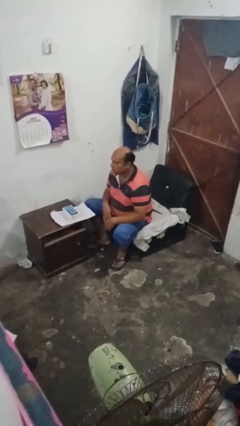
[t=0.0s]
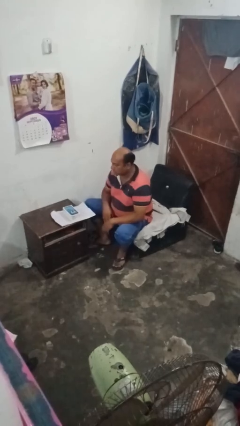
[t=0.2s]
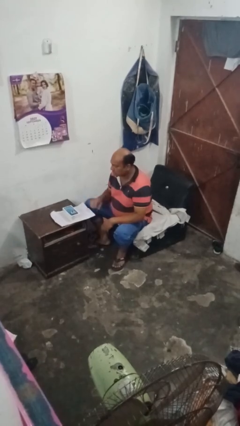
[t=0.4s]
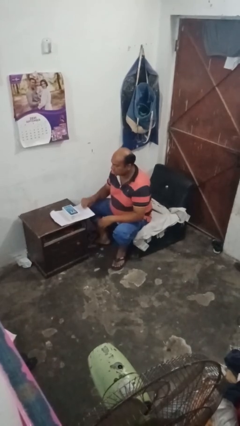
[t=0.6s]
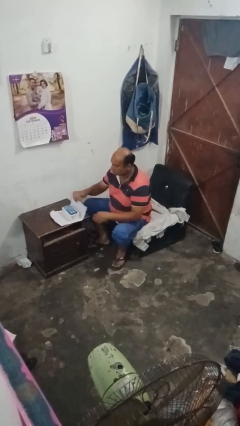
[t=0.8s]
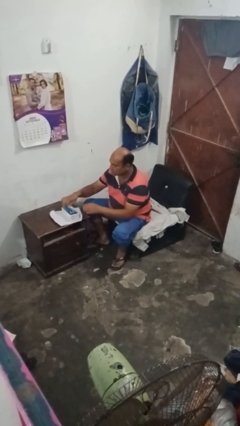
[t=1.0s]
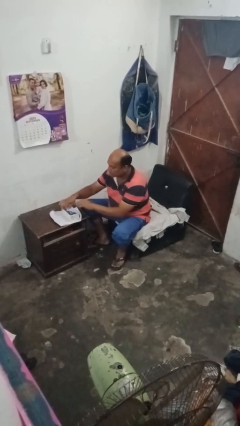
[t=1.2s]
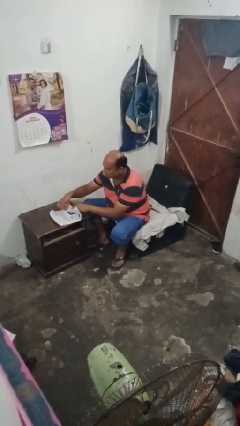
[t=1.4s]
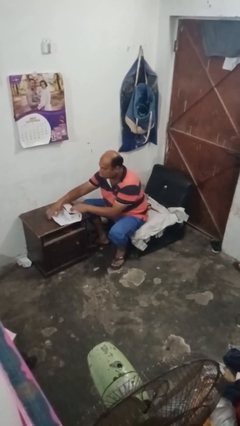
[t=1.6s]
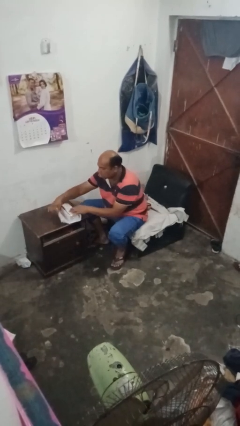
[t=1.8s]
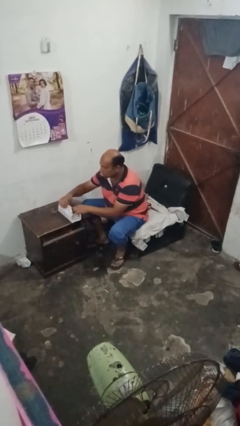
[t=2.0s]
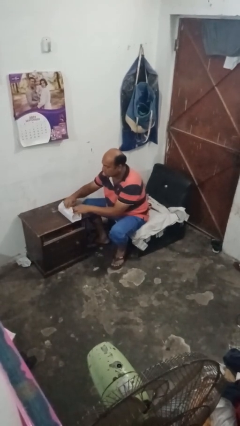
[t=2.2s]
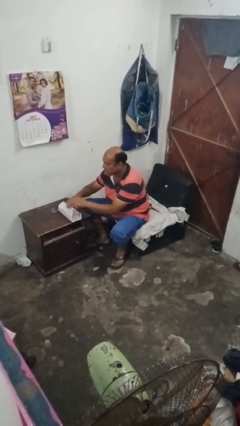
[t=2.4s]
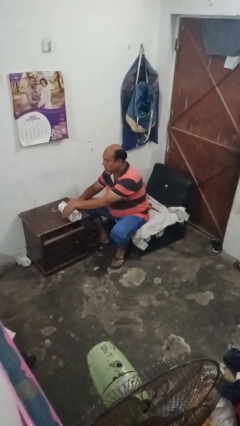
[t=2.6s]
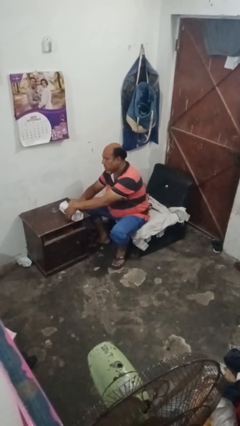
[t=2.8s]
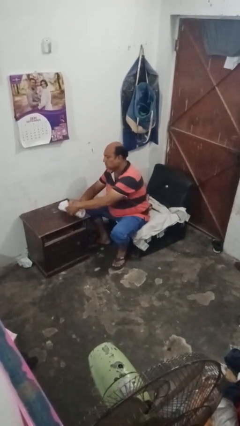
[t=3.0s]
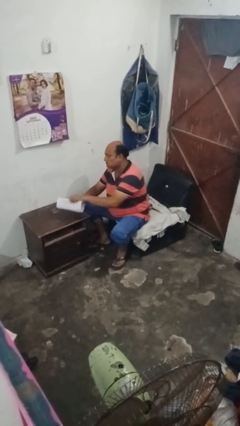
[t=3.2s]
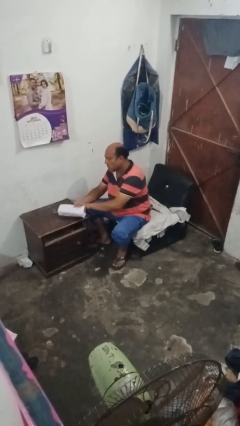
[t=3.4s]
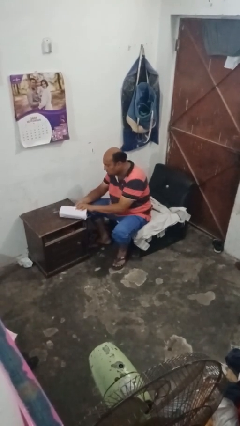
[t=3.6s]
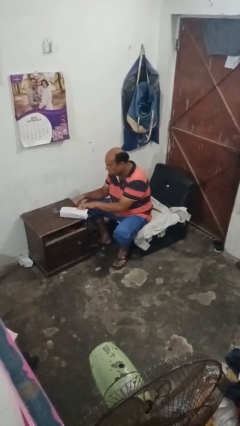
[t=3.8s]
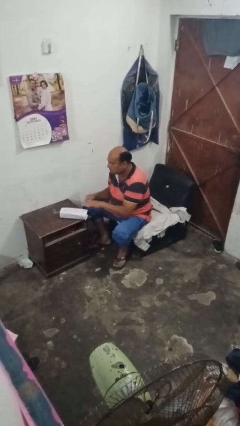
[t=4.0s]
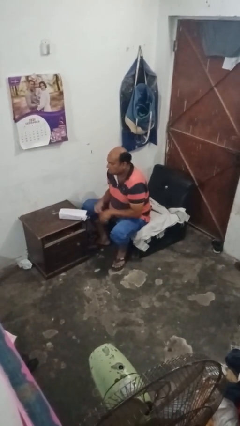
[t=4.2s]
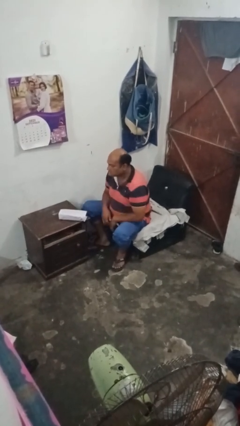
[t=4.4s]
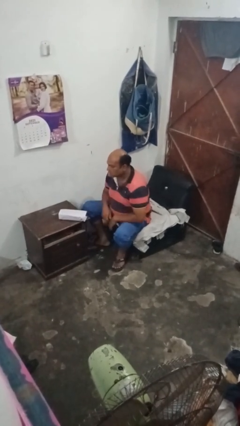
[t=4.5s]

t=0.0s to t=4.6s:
person wraps box

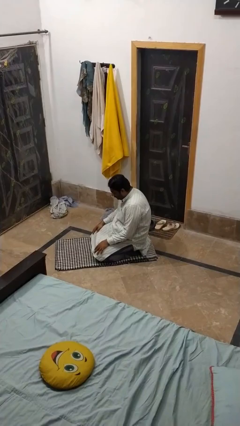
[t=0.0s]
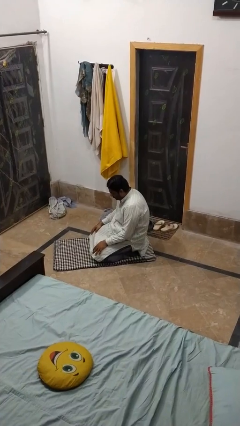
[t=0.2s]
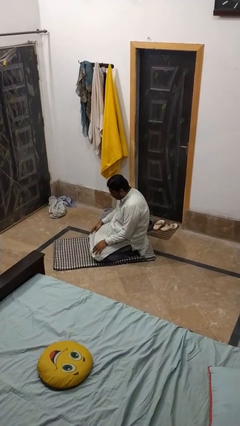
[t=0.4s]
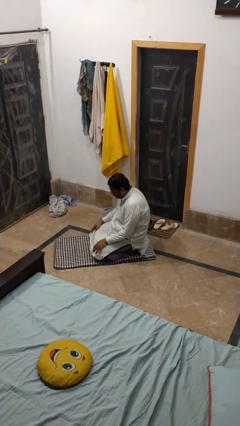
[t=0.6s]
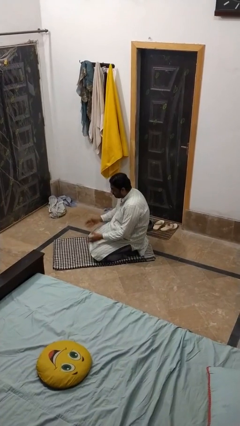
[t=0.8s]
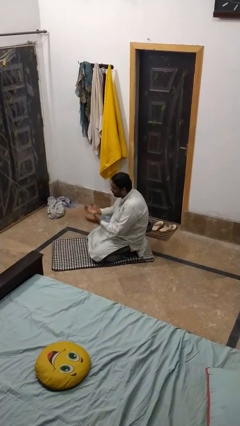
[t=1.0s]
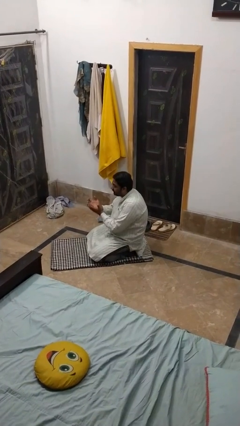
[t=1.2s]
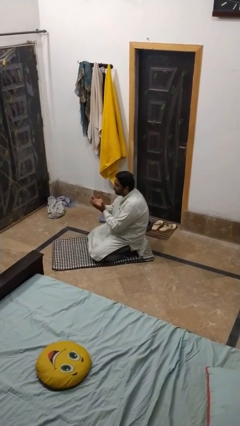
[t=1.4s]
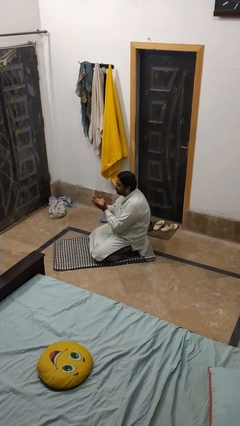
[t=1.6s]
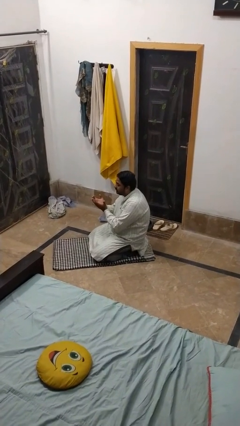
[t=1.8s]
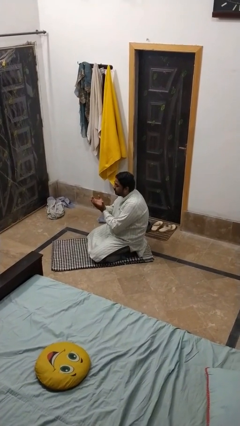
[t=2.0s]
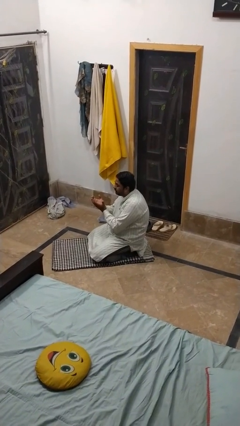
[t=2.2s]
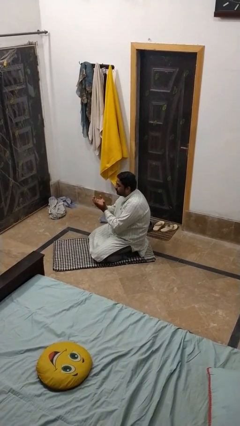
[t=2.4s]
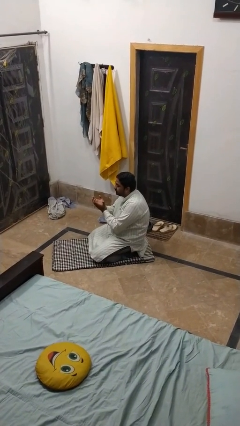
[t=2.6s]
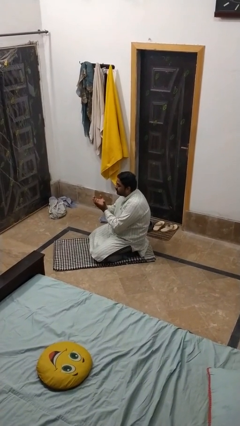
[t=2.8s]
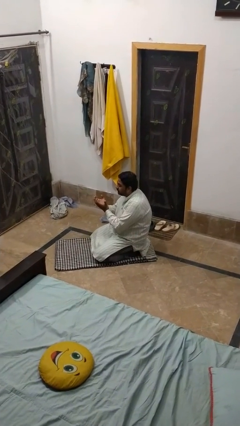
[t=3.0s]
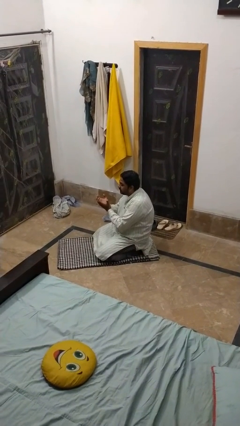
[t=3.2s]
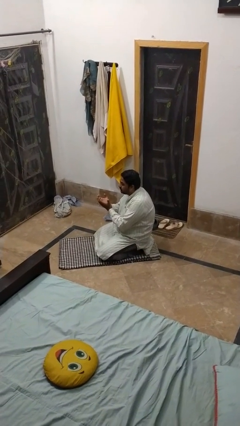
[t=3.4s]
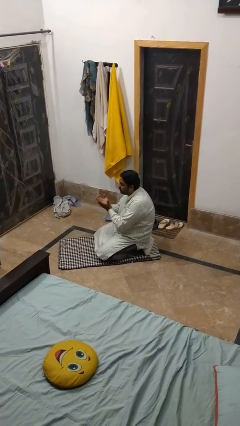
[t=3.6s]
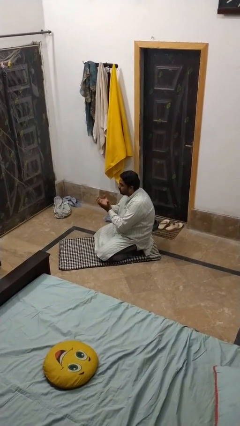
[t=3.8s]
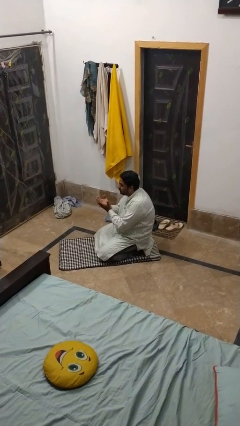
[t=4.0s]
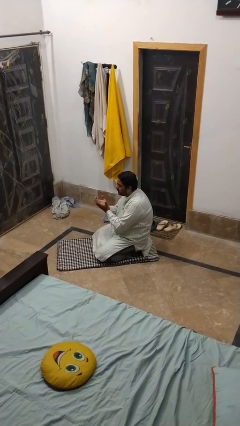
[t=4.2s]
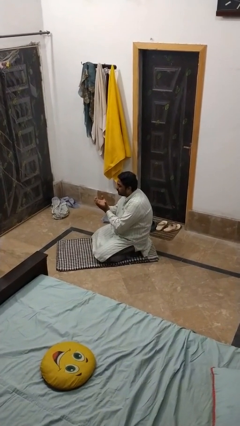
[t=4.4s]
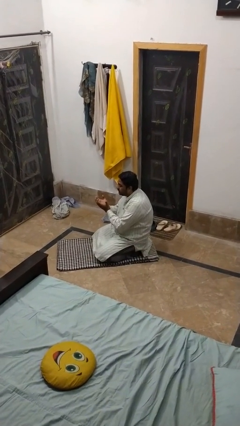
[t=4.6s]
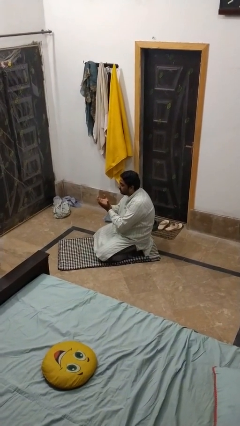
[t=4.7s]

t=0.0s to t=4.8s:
person prays

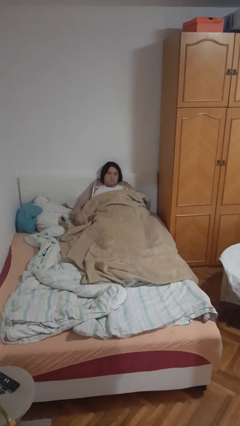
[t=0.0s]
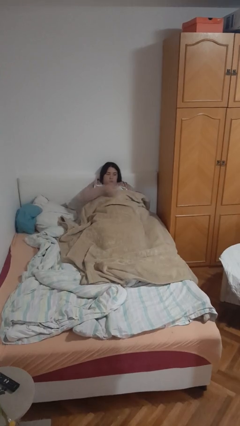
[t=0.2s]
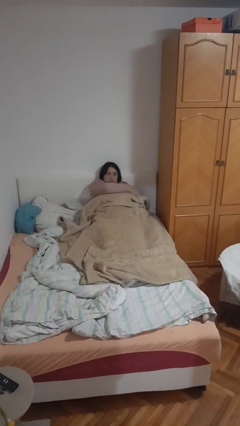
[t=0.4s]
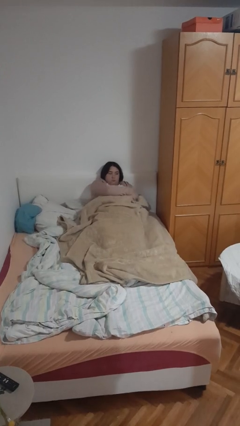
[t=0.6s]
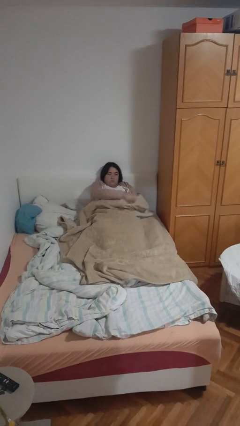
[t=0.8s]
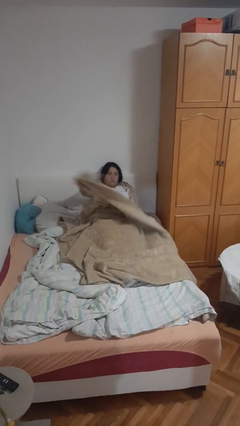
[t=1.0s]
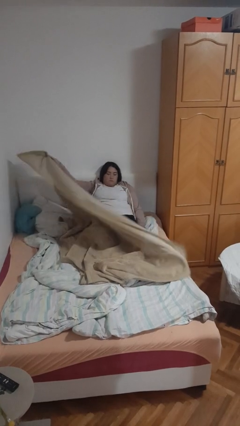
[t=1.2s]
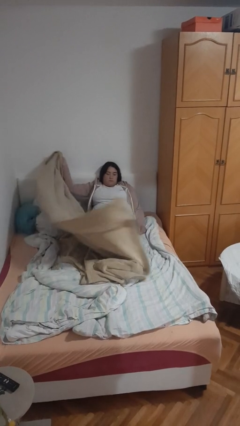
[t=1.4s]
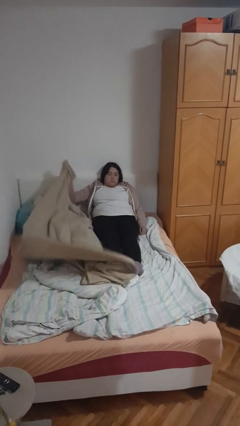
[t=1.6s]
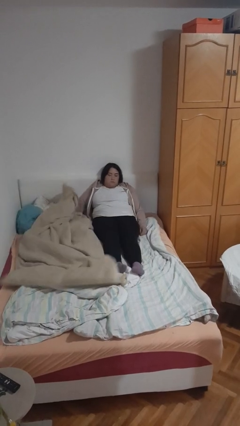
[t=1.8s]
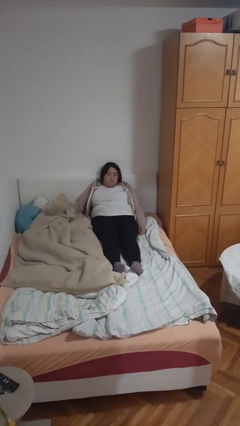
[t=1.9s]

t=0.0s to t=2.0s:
person uncovers with blanket

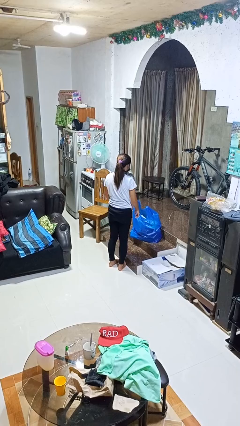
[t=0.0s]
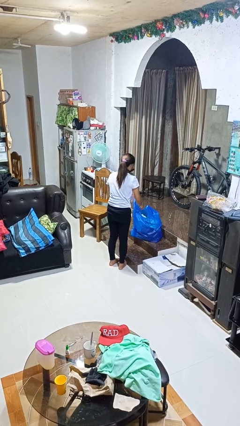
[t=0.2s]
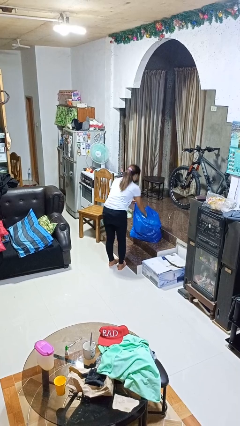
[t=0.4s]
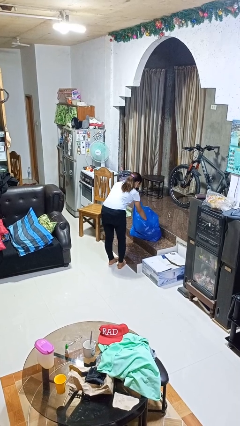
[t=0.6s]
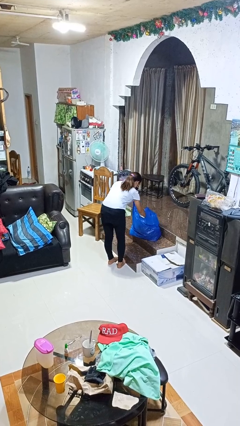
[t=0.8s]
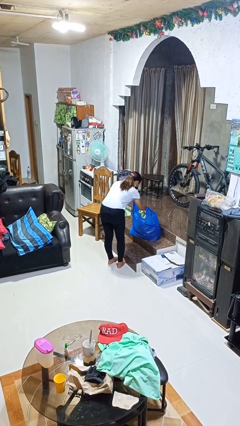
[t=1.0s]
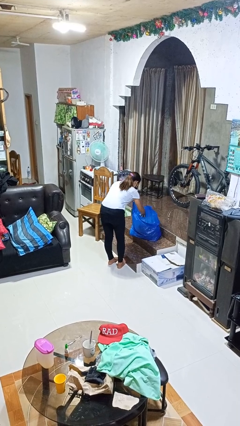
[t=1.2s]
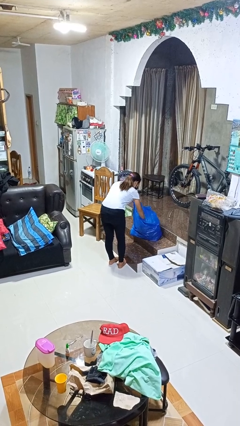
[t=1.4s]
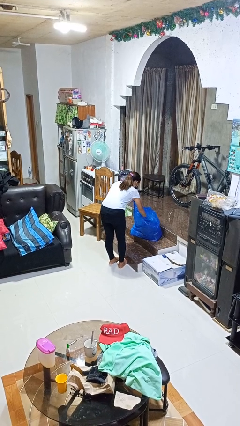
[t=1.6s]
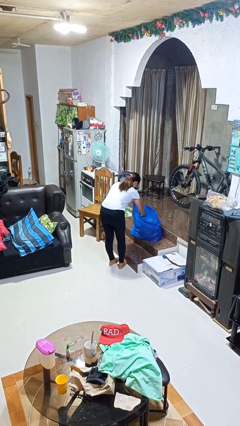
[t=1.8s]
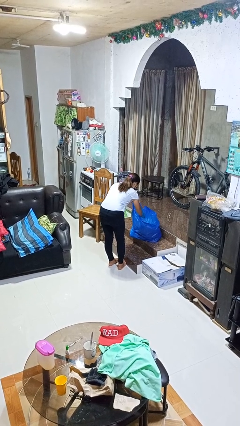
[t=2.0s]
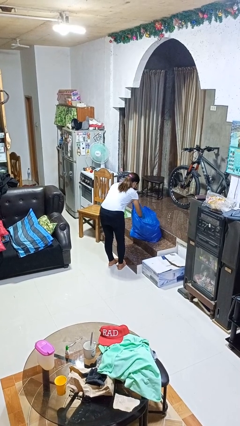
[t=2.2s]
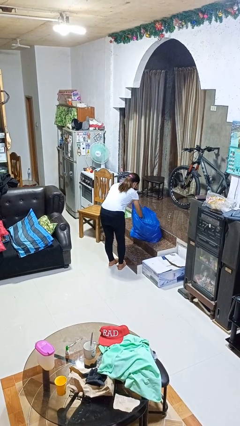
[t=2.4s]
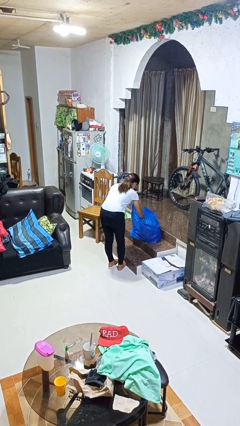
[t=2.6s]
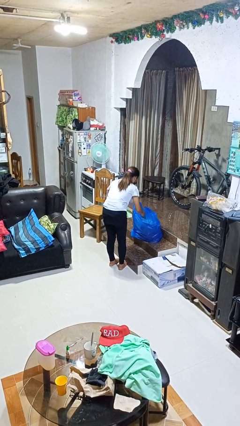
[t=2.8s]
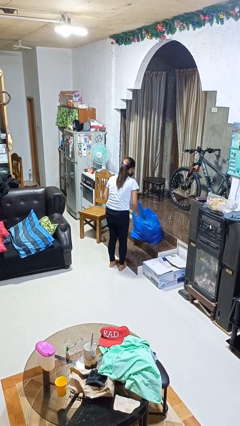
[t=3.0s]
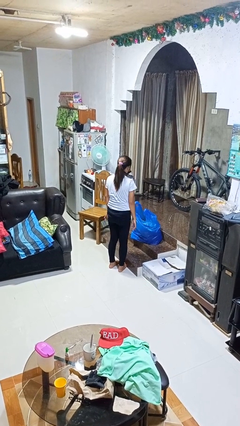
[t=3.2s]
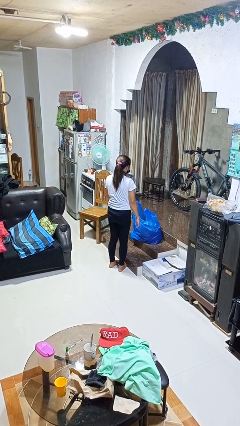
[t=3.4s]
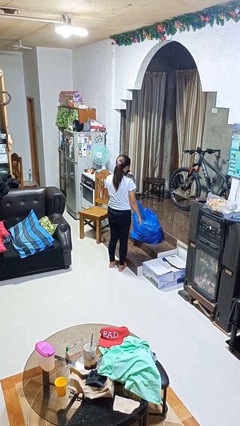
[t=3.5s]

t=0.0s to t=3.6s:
person searches in bag

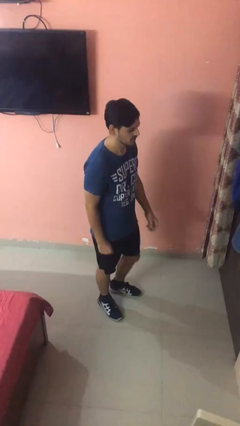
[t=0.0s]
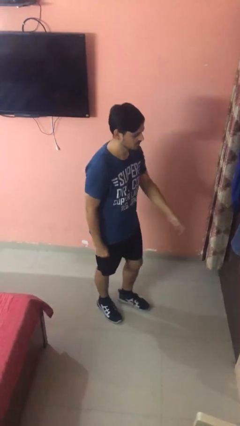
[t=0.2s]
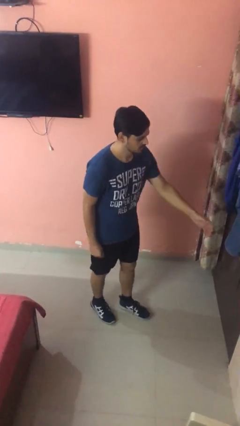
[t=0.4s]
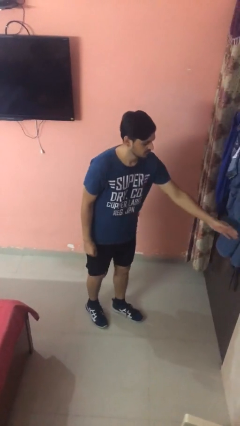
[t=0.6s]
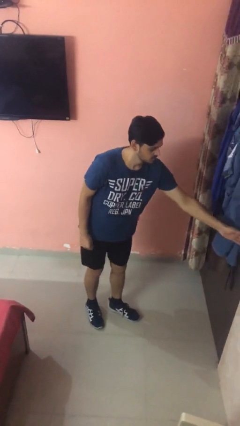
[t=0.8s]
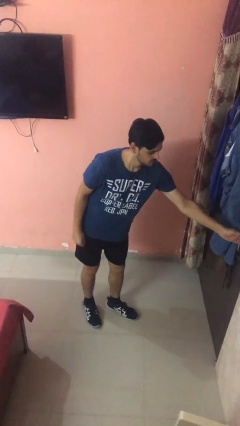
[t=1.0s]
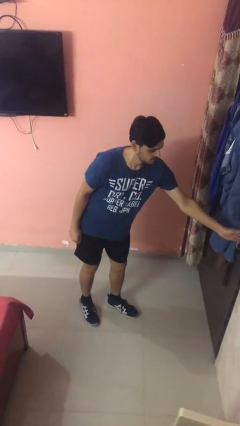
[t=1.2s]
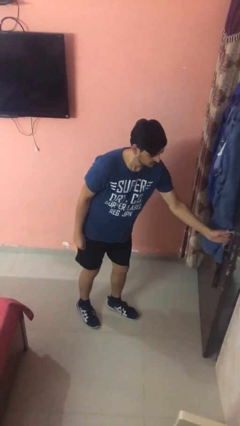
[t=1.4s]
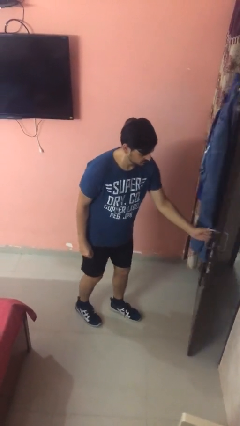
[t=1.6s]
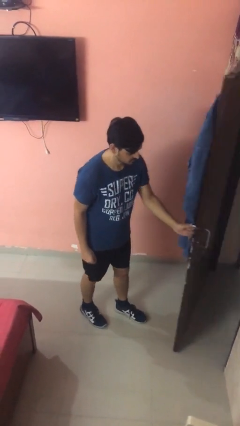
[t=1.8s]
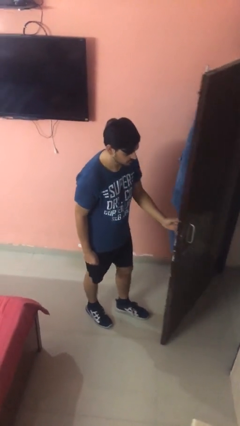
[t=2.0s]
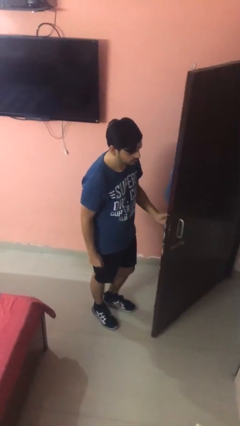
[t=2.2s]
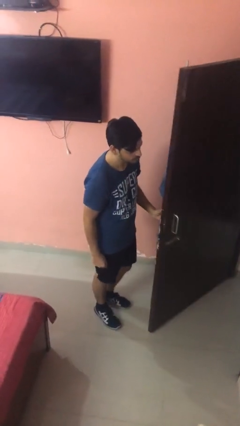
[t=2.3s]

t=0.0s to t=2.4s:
person opens facility door

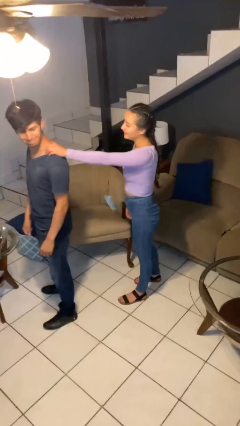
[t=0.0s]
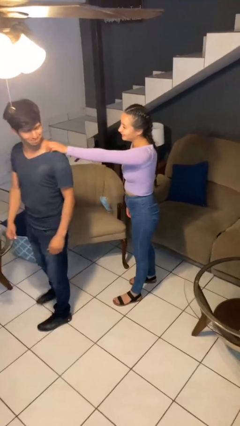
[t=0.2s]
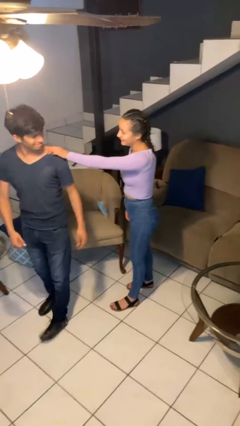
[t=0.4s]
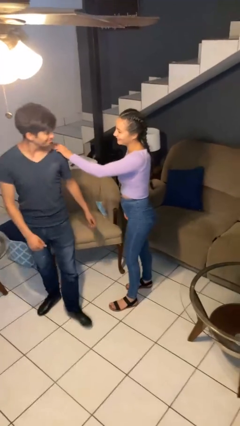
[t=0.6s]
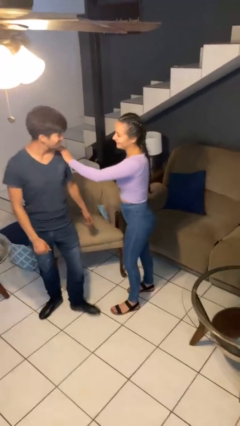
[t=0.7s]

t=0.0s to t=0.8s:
person grabs person by shoulder
